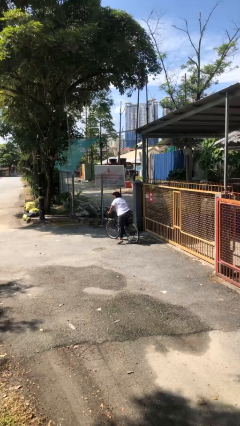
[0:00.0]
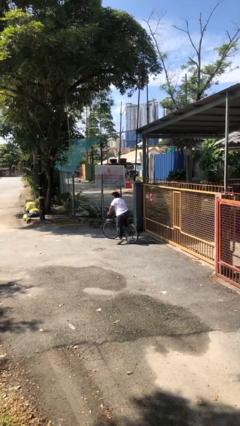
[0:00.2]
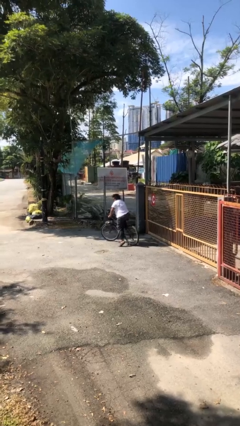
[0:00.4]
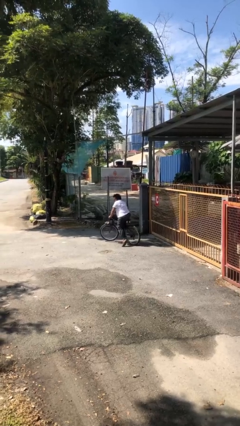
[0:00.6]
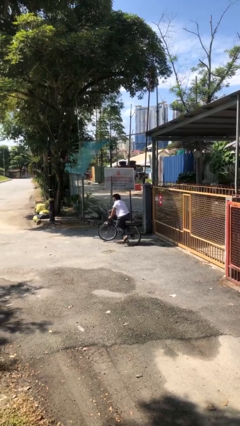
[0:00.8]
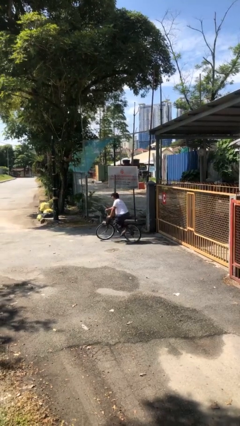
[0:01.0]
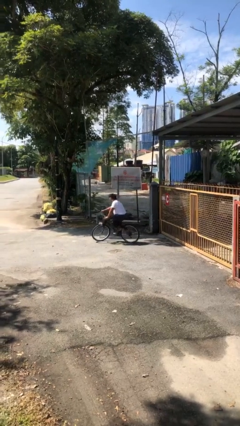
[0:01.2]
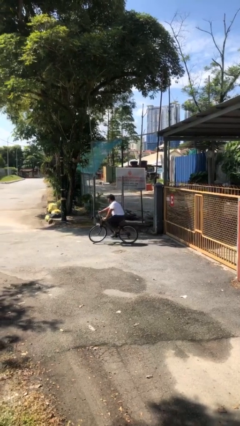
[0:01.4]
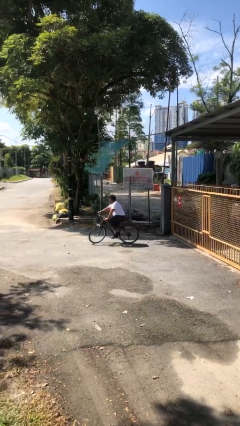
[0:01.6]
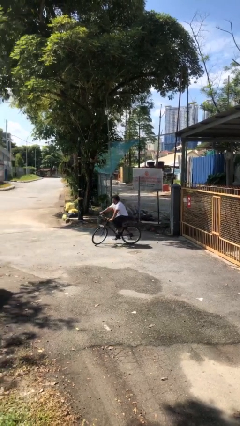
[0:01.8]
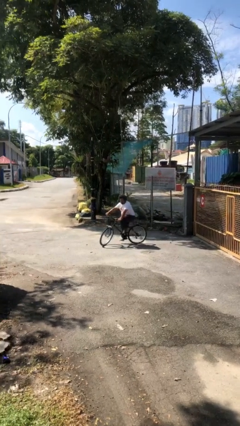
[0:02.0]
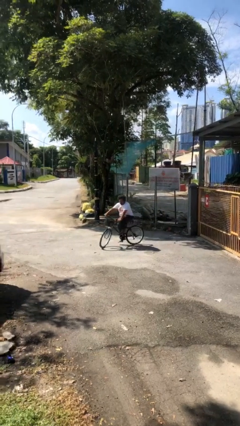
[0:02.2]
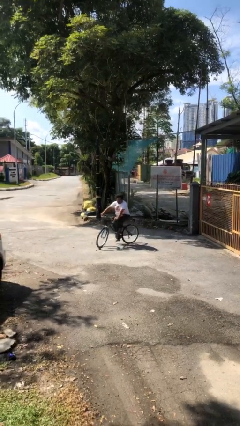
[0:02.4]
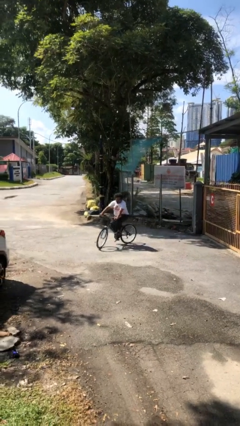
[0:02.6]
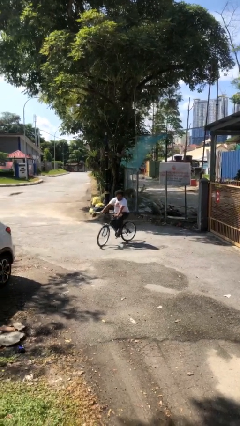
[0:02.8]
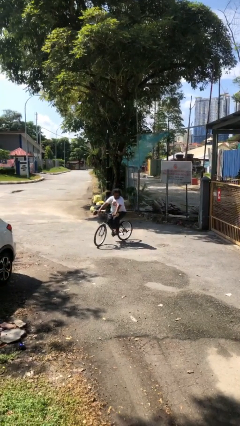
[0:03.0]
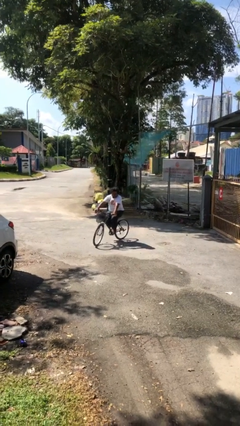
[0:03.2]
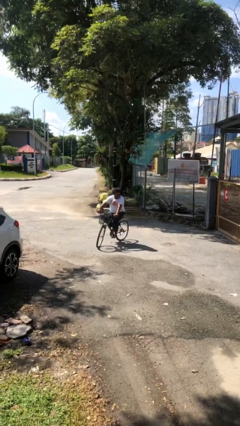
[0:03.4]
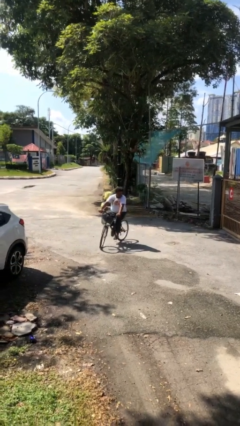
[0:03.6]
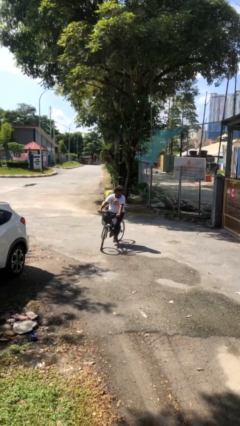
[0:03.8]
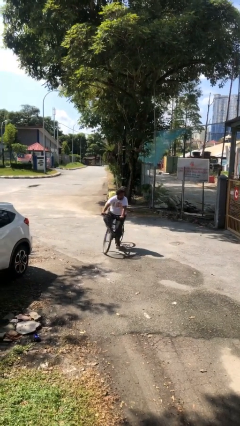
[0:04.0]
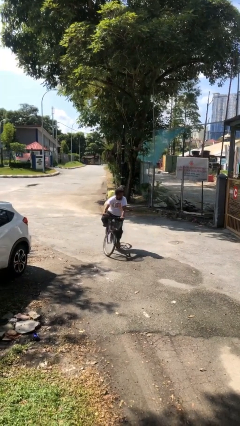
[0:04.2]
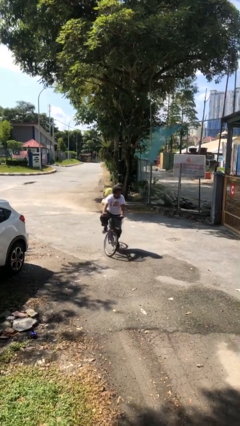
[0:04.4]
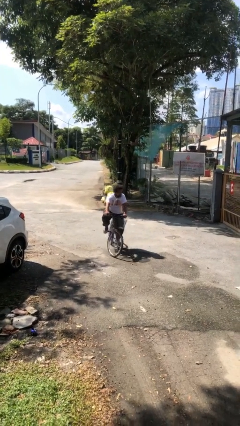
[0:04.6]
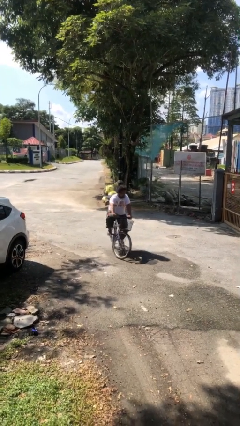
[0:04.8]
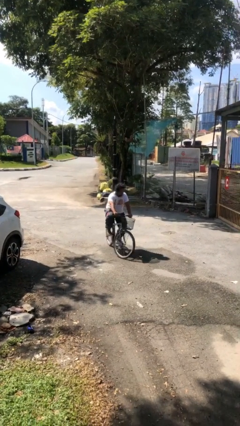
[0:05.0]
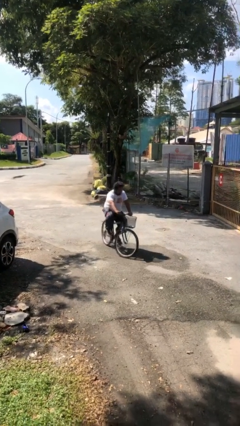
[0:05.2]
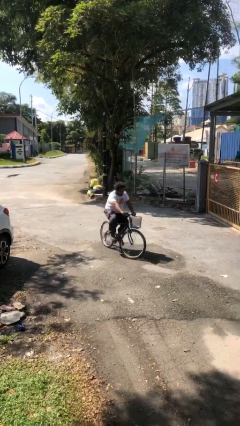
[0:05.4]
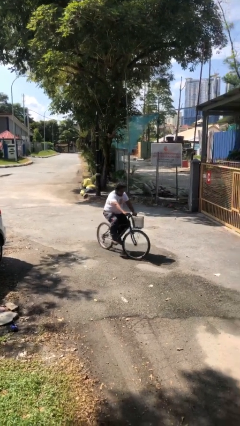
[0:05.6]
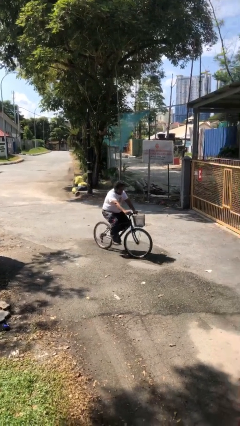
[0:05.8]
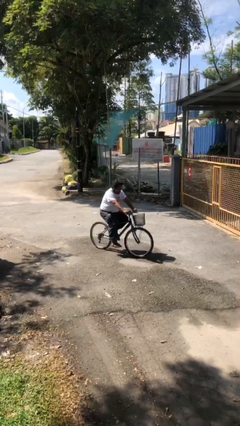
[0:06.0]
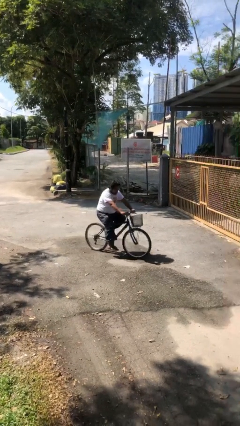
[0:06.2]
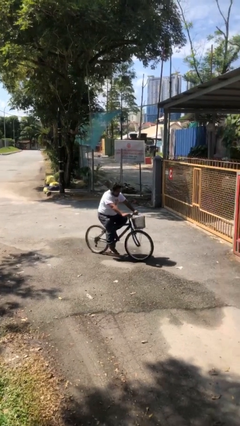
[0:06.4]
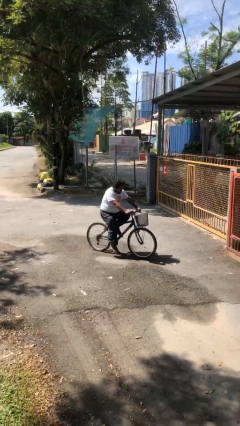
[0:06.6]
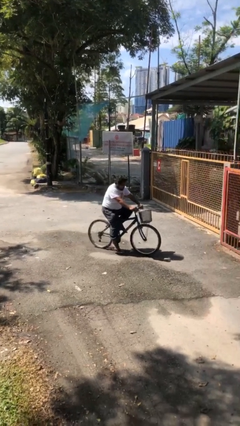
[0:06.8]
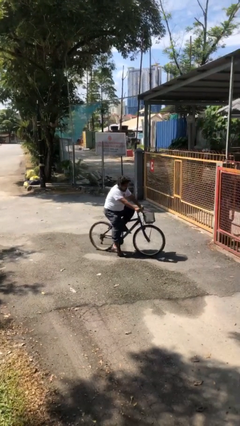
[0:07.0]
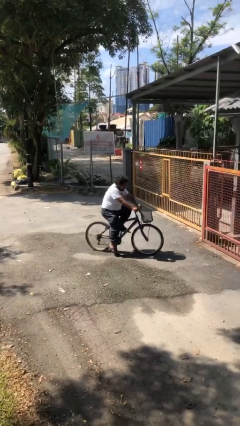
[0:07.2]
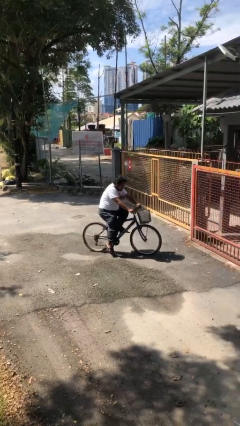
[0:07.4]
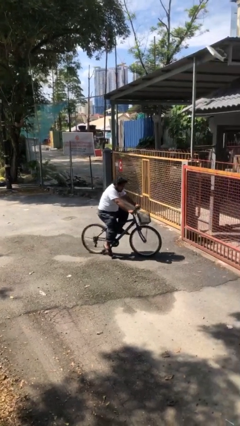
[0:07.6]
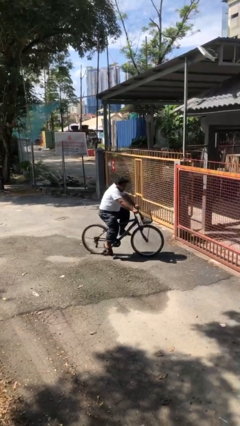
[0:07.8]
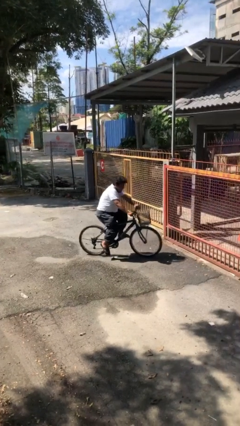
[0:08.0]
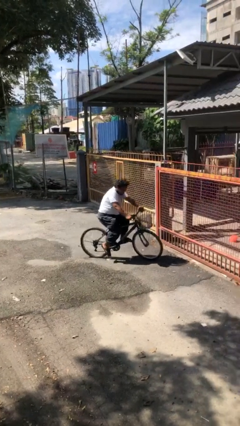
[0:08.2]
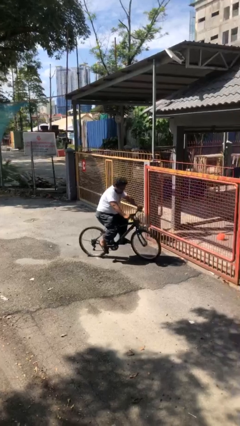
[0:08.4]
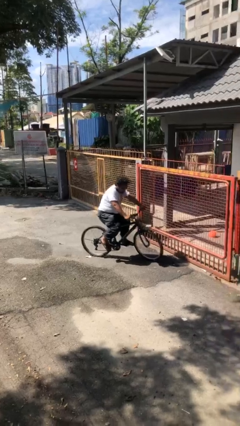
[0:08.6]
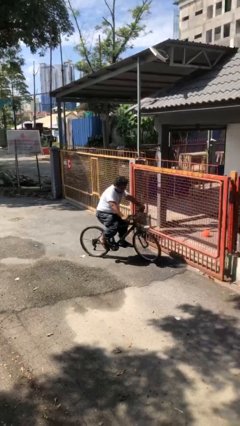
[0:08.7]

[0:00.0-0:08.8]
person rides bicycle

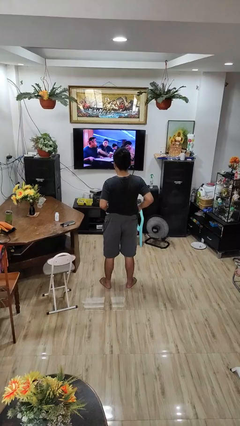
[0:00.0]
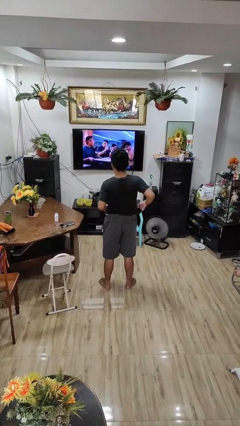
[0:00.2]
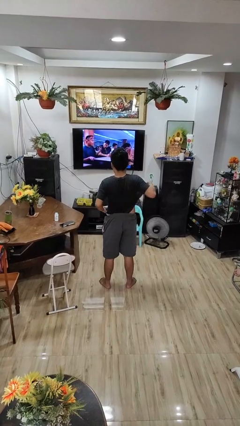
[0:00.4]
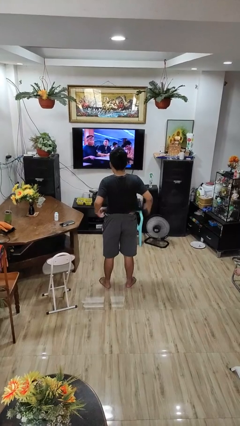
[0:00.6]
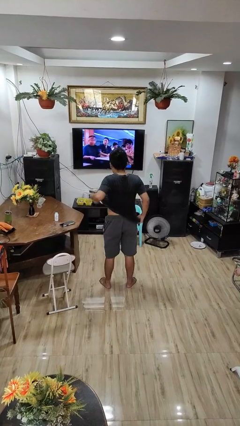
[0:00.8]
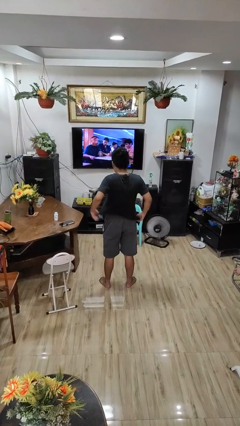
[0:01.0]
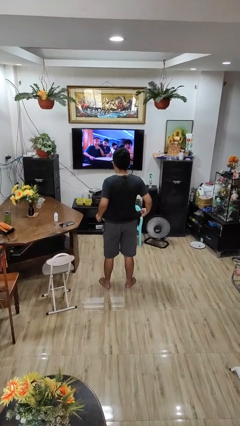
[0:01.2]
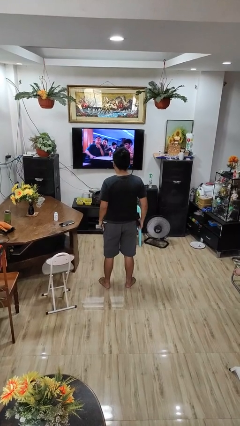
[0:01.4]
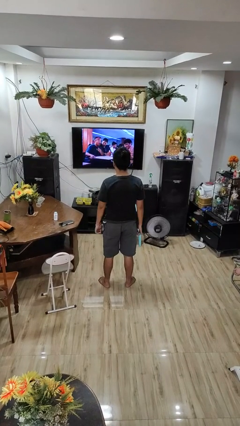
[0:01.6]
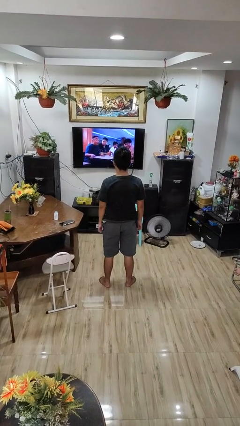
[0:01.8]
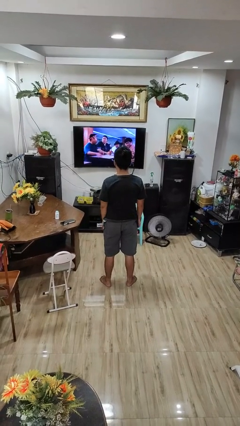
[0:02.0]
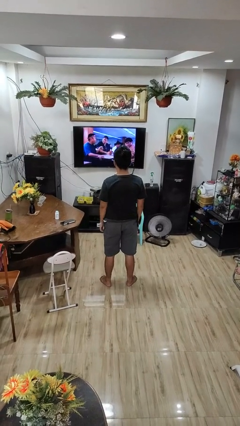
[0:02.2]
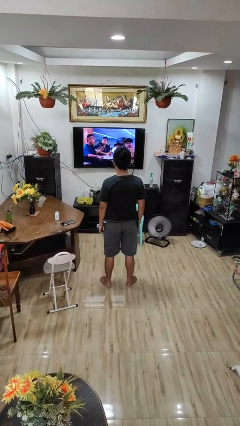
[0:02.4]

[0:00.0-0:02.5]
person untucks shirt

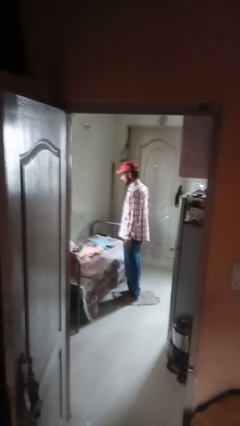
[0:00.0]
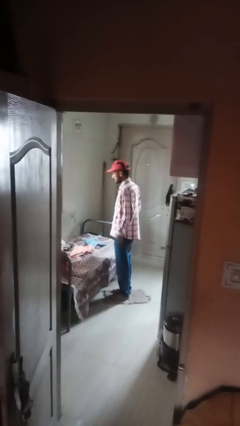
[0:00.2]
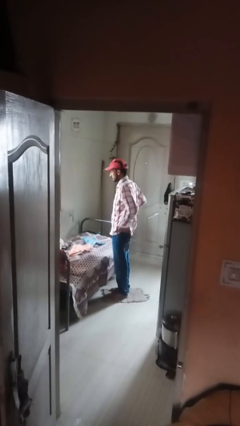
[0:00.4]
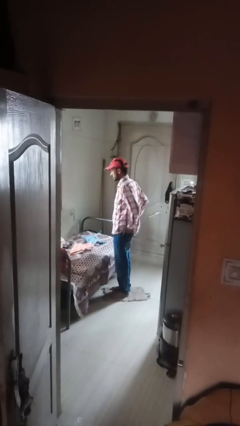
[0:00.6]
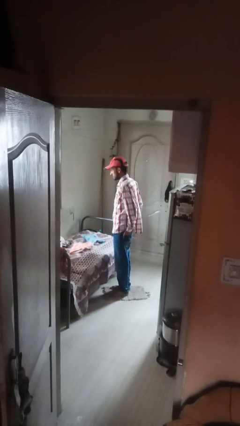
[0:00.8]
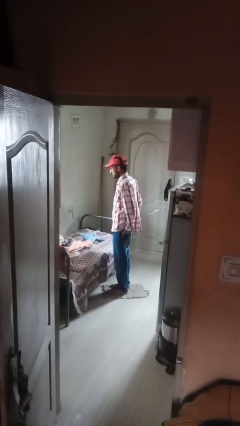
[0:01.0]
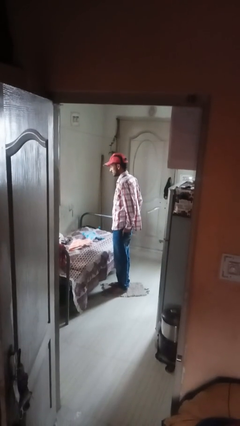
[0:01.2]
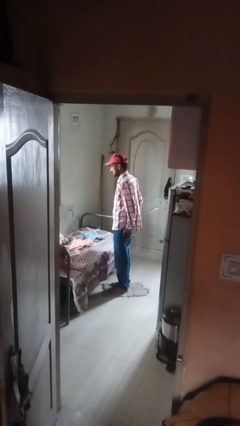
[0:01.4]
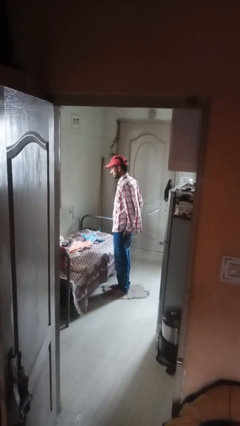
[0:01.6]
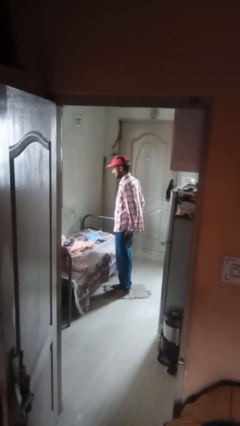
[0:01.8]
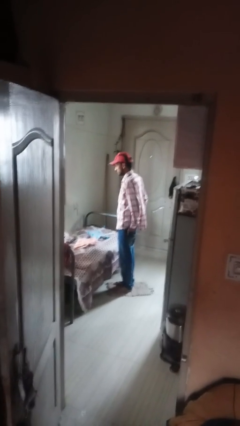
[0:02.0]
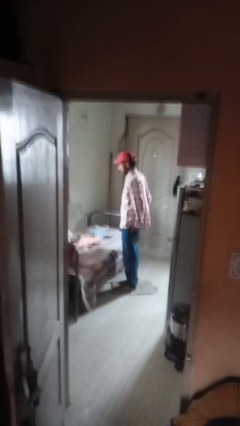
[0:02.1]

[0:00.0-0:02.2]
person puts hands in back pockets

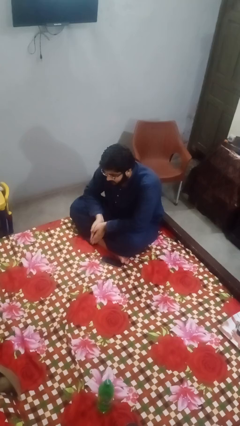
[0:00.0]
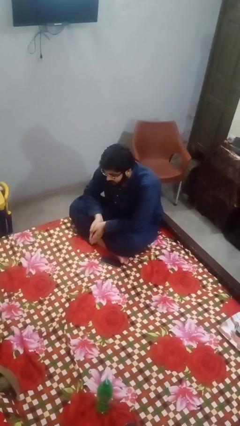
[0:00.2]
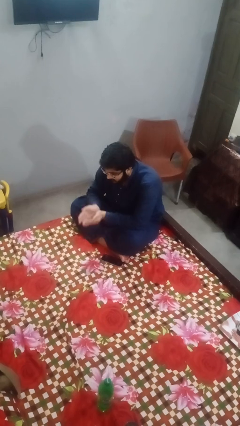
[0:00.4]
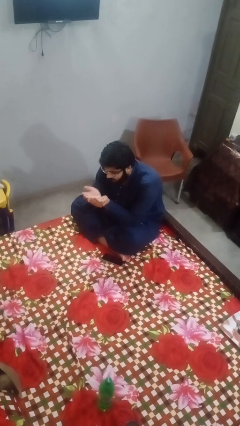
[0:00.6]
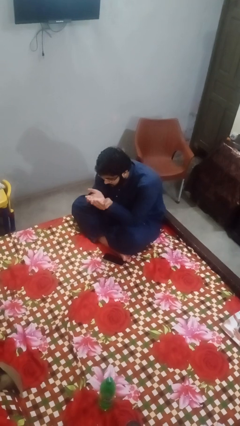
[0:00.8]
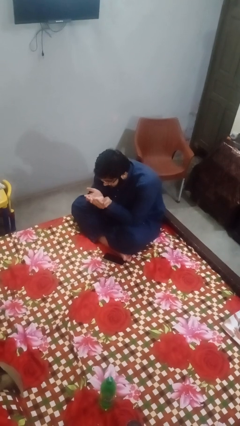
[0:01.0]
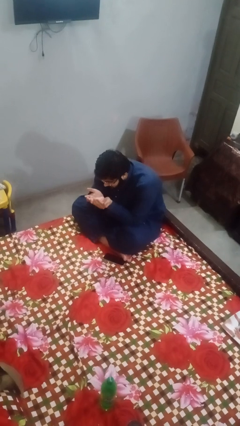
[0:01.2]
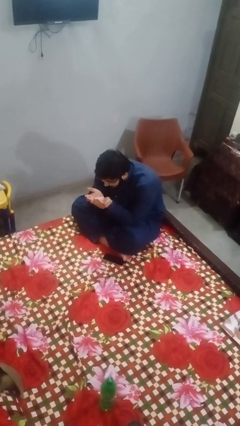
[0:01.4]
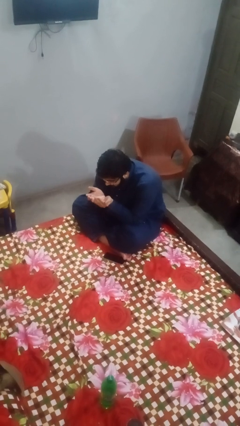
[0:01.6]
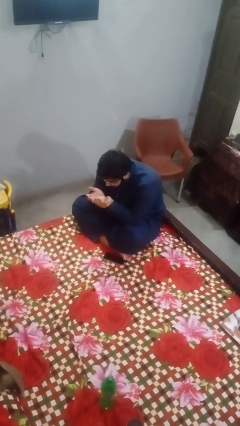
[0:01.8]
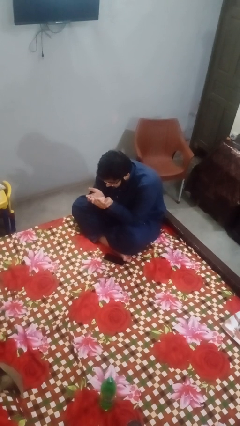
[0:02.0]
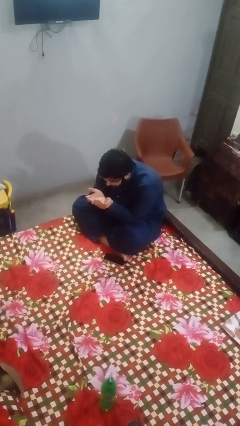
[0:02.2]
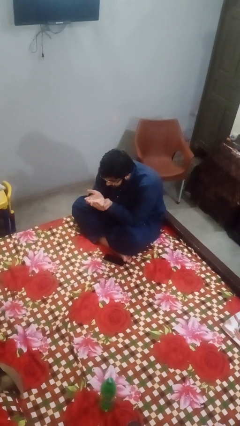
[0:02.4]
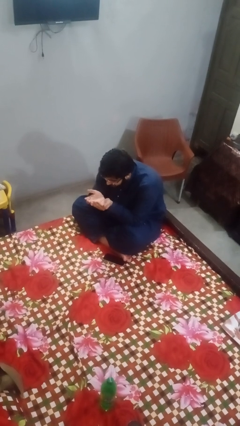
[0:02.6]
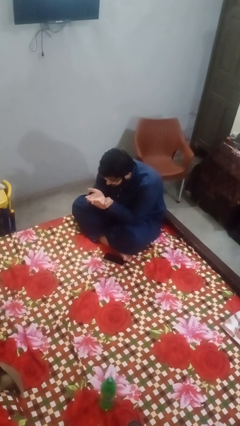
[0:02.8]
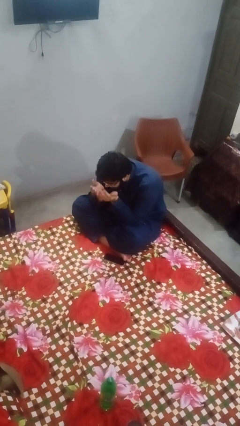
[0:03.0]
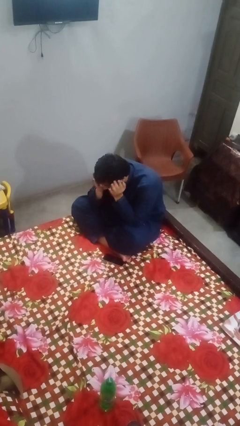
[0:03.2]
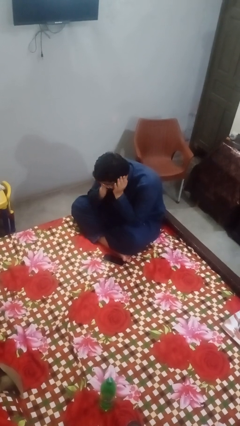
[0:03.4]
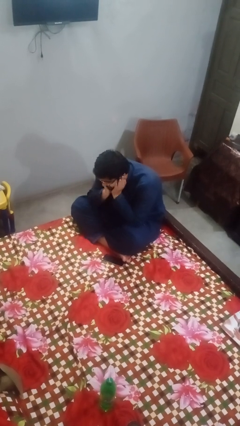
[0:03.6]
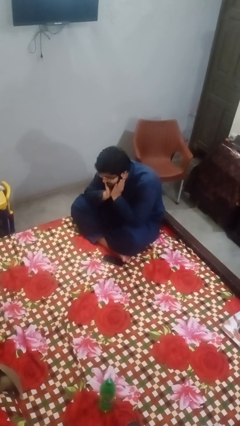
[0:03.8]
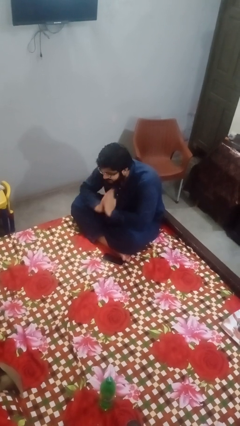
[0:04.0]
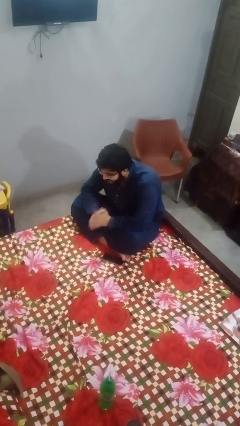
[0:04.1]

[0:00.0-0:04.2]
person prays

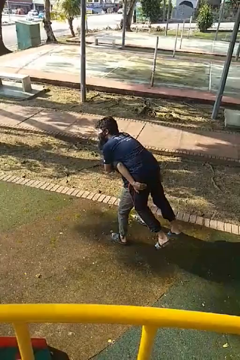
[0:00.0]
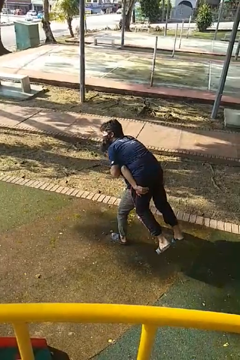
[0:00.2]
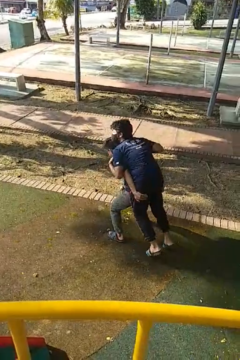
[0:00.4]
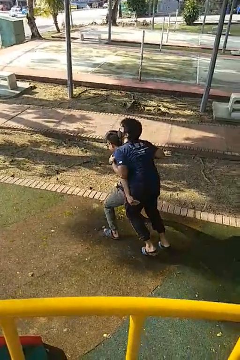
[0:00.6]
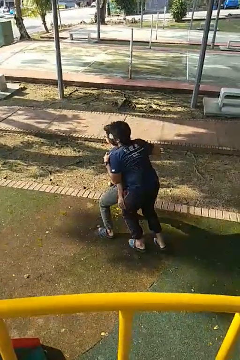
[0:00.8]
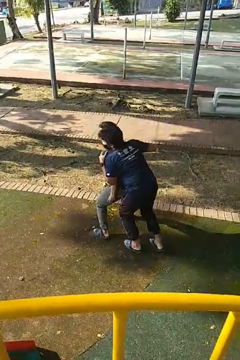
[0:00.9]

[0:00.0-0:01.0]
person puts down person
